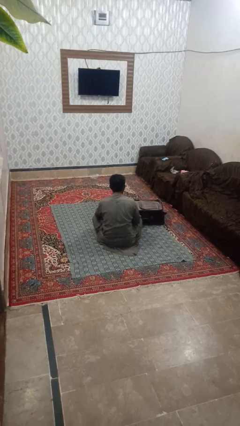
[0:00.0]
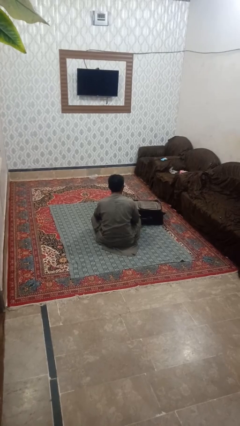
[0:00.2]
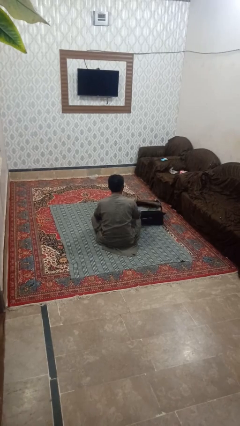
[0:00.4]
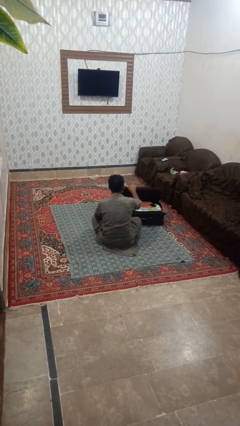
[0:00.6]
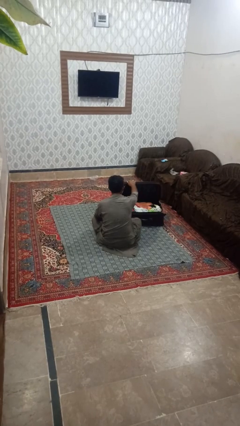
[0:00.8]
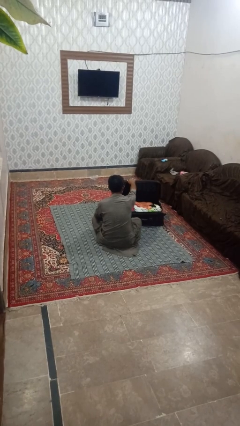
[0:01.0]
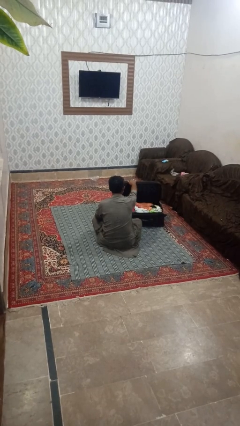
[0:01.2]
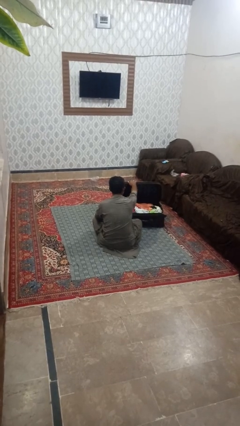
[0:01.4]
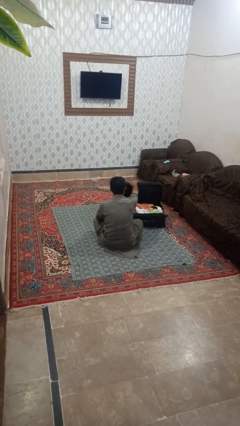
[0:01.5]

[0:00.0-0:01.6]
person opens suitcase

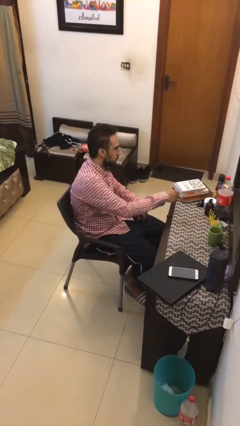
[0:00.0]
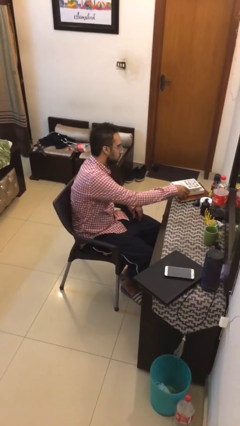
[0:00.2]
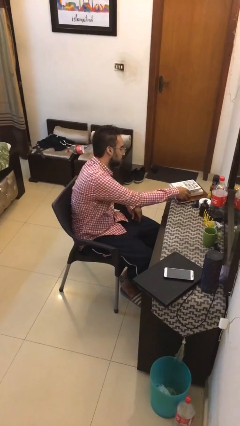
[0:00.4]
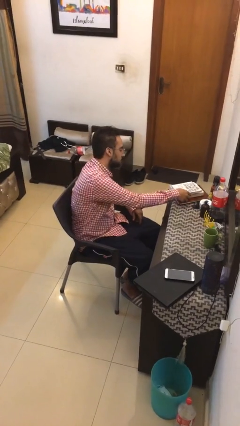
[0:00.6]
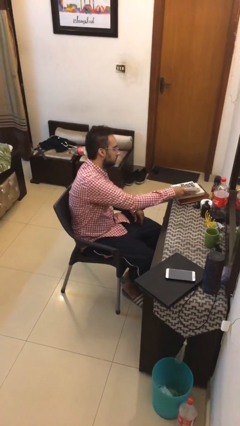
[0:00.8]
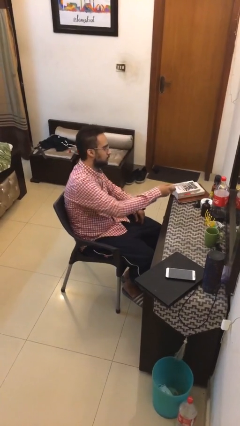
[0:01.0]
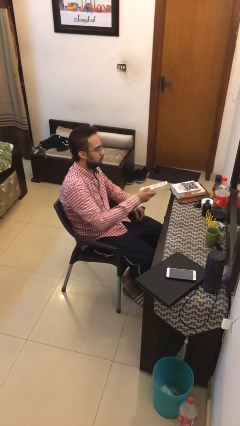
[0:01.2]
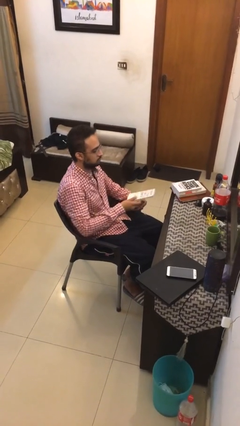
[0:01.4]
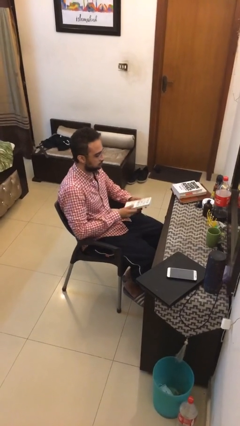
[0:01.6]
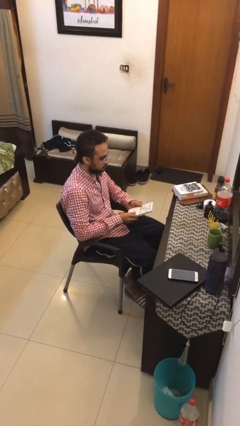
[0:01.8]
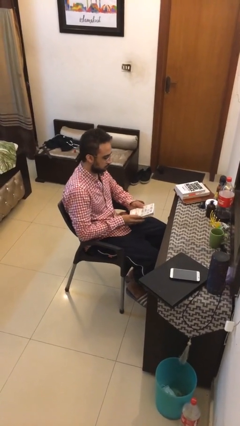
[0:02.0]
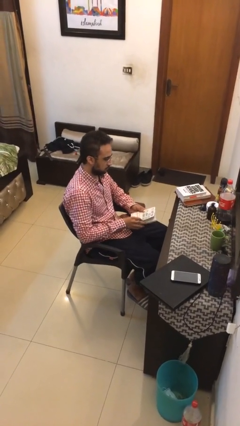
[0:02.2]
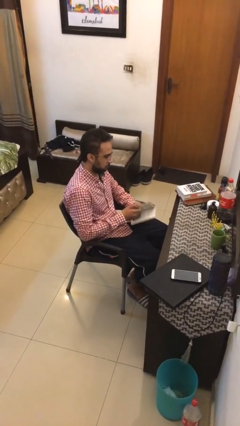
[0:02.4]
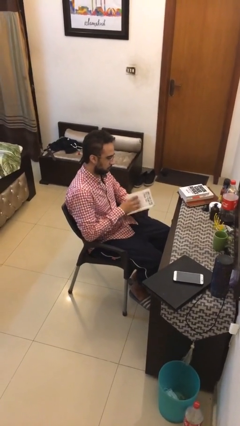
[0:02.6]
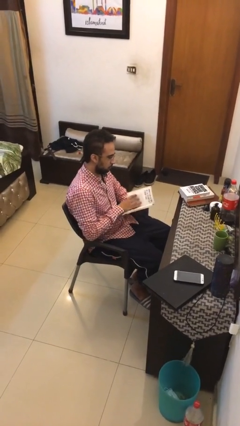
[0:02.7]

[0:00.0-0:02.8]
person picks up object from table

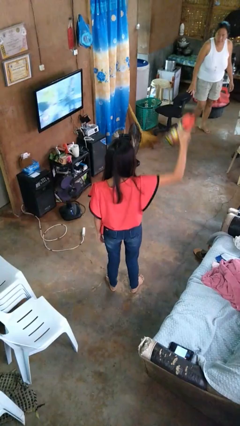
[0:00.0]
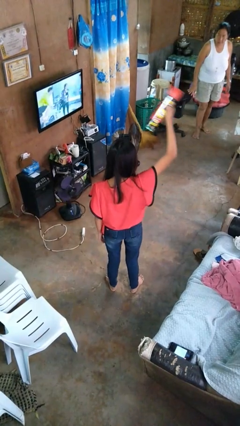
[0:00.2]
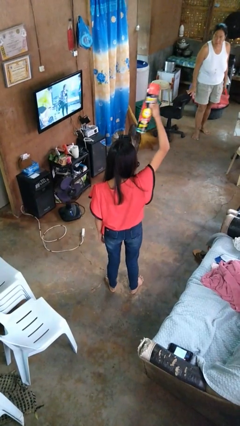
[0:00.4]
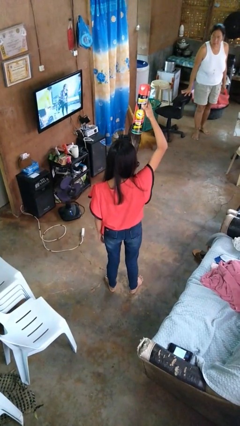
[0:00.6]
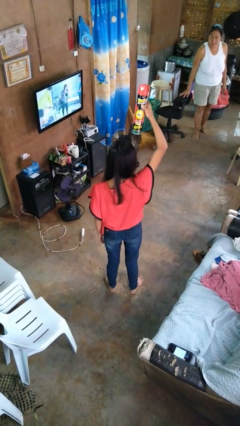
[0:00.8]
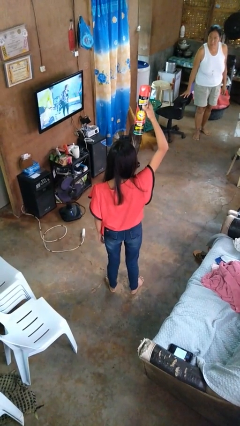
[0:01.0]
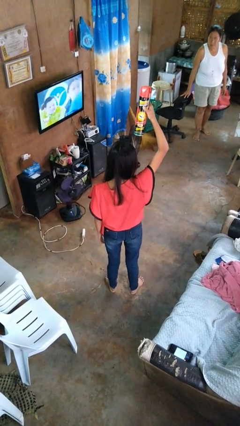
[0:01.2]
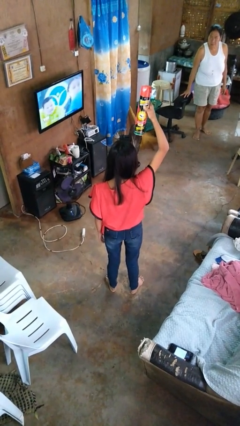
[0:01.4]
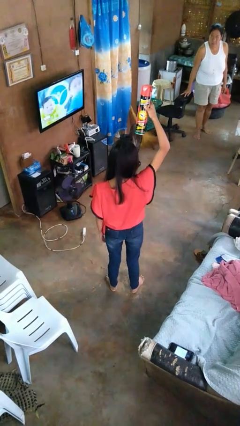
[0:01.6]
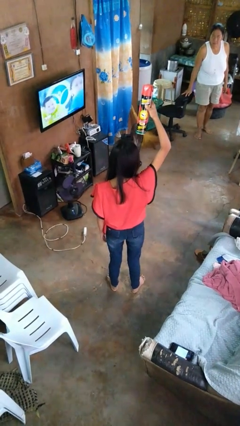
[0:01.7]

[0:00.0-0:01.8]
person holds object above head

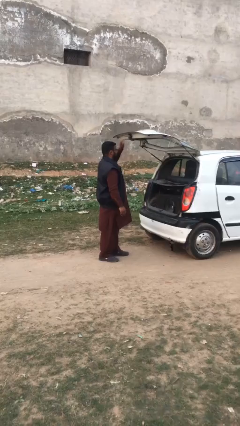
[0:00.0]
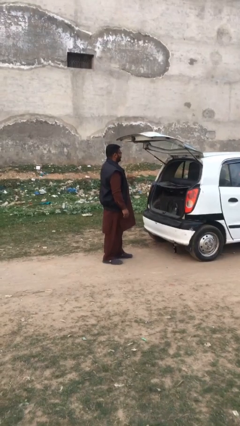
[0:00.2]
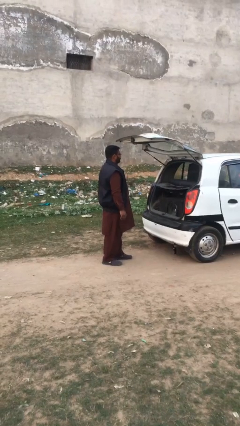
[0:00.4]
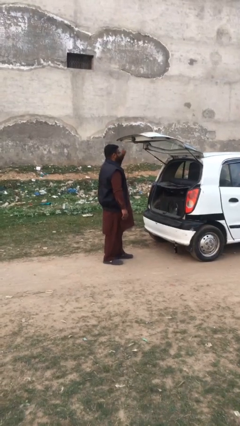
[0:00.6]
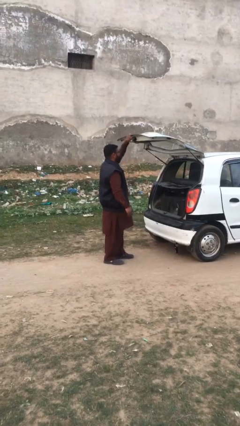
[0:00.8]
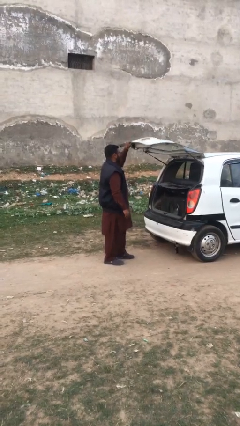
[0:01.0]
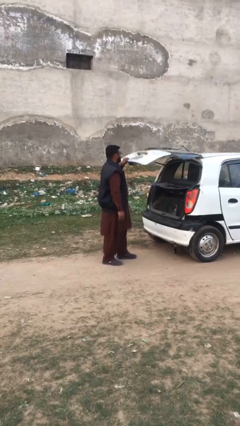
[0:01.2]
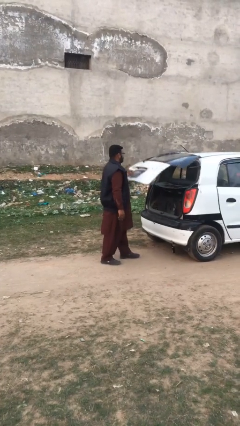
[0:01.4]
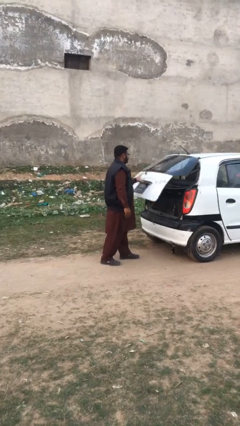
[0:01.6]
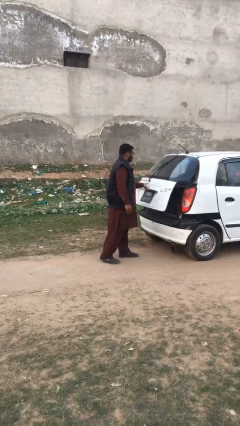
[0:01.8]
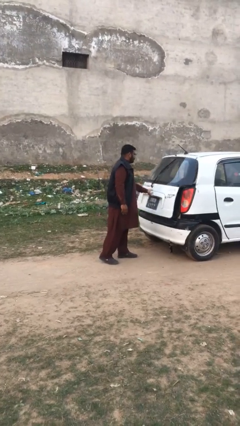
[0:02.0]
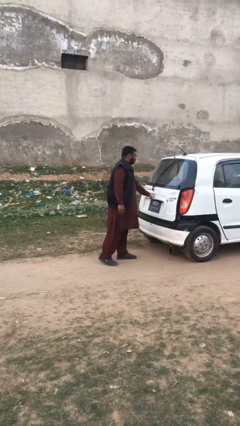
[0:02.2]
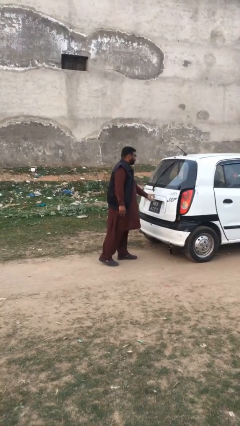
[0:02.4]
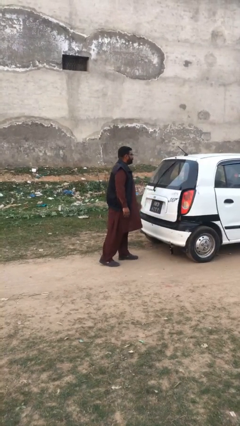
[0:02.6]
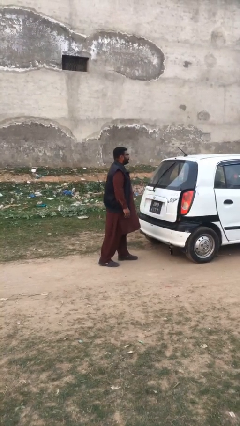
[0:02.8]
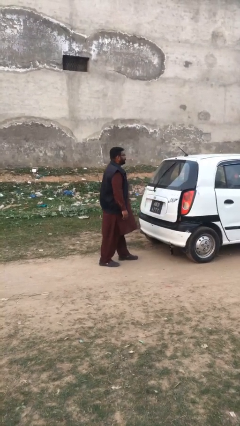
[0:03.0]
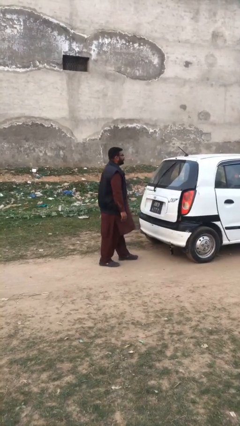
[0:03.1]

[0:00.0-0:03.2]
person closes car trunk

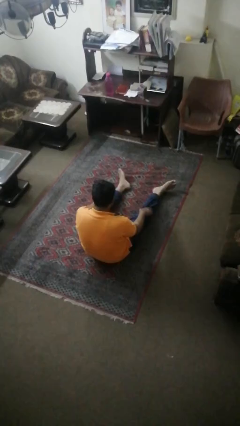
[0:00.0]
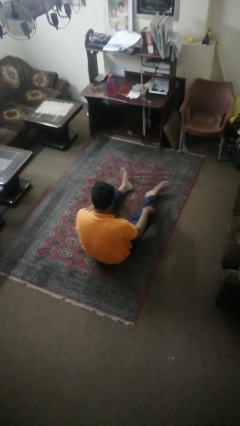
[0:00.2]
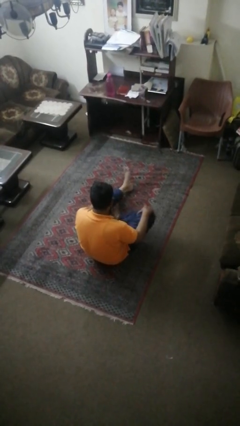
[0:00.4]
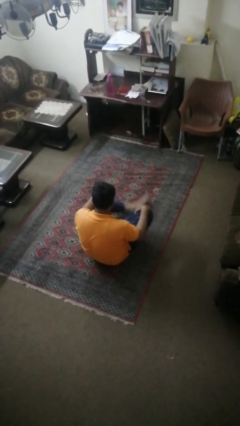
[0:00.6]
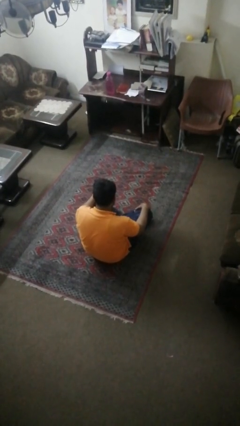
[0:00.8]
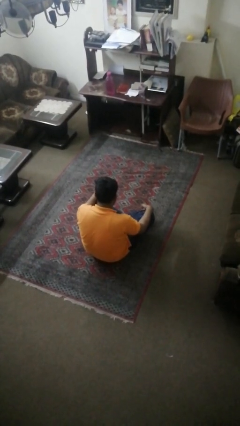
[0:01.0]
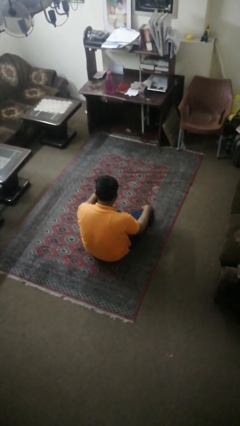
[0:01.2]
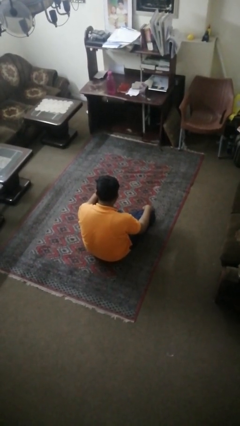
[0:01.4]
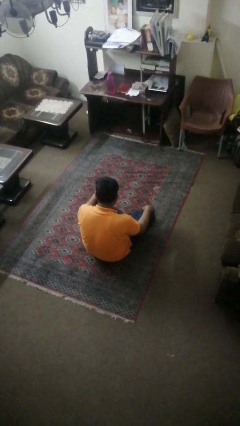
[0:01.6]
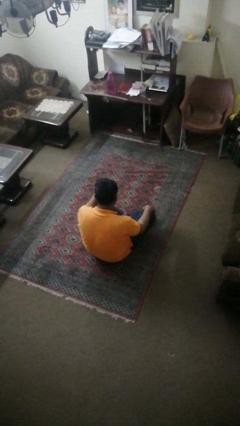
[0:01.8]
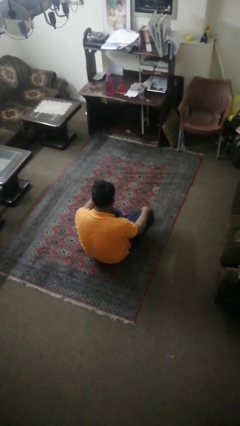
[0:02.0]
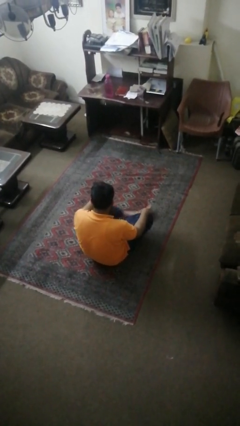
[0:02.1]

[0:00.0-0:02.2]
person crosses legs

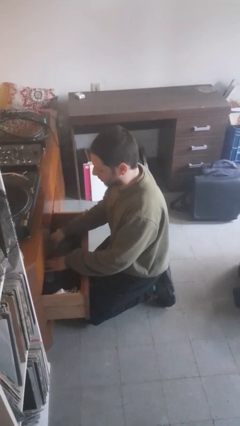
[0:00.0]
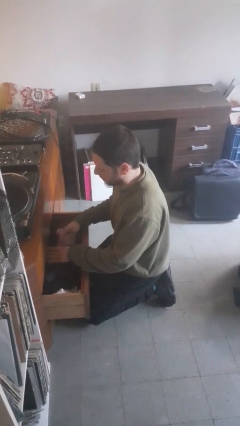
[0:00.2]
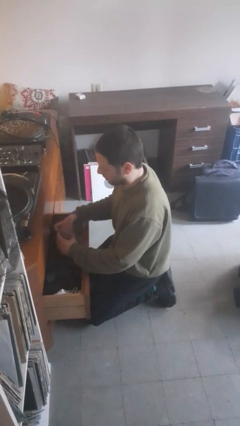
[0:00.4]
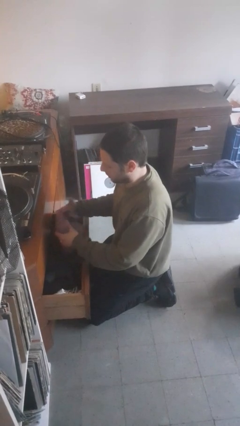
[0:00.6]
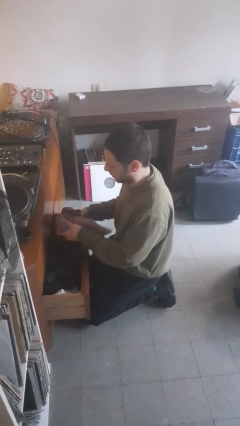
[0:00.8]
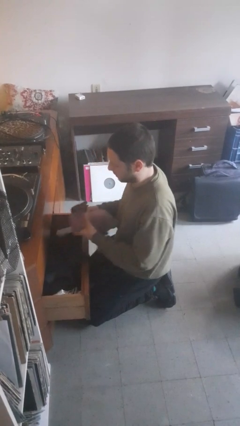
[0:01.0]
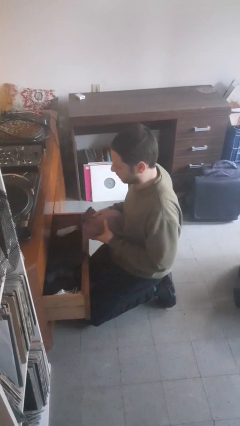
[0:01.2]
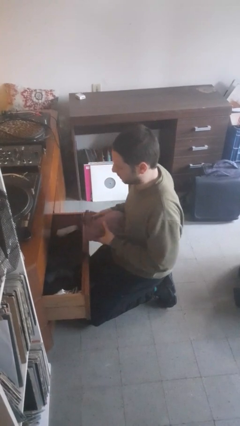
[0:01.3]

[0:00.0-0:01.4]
person takes clothes from dresser

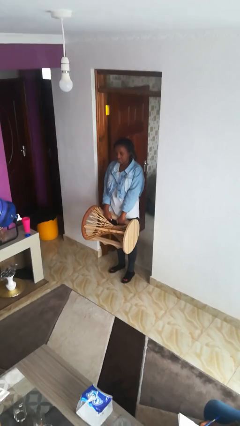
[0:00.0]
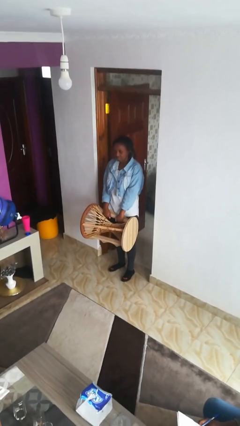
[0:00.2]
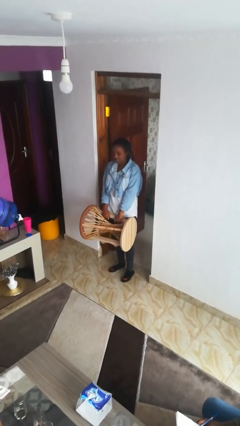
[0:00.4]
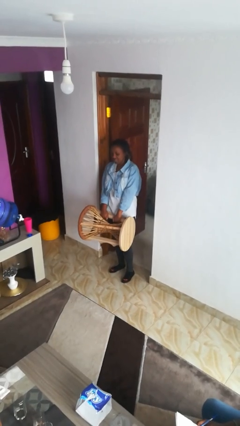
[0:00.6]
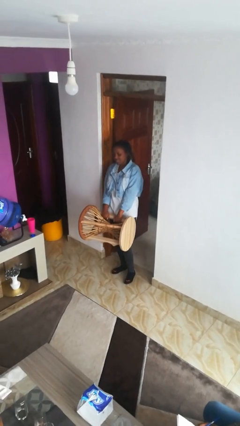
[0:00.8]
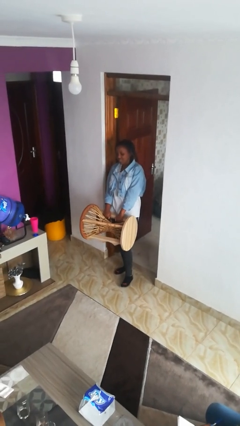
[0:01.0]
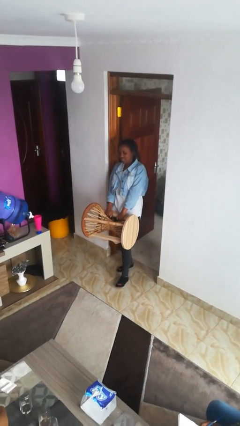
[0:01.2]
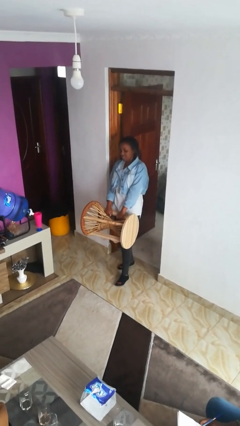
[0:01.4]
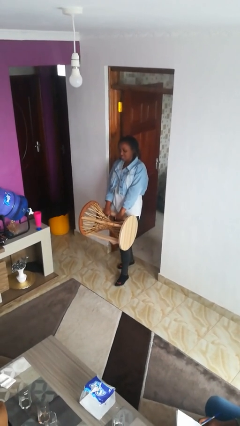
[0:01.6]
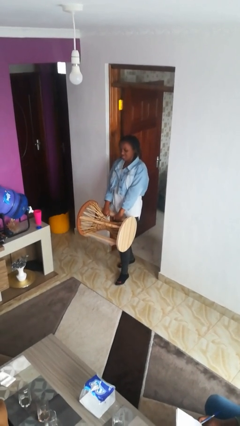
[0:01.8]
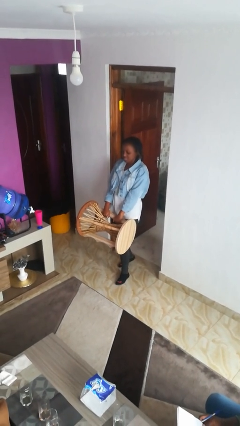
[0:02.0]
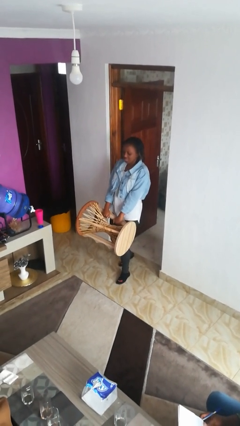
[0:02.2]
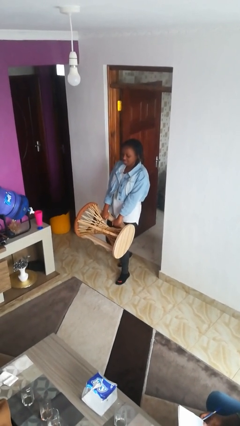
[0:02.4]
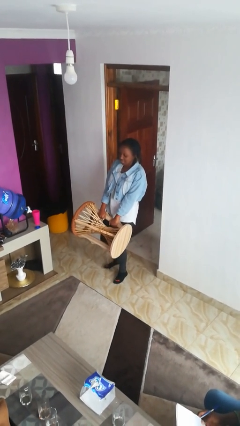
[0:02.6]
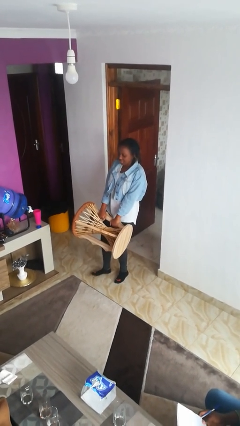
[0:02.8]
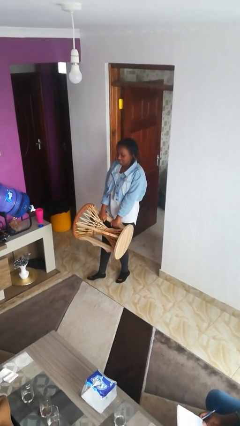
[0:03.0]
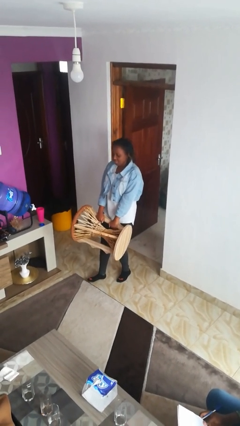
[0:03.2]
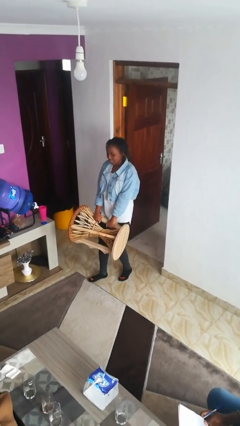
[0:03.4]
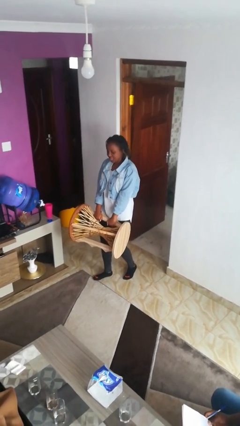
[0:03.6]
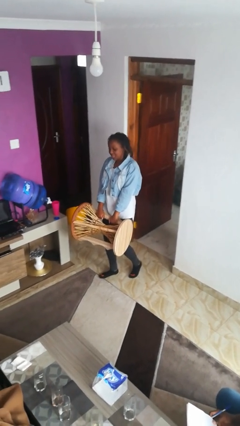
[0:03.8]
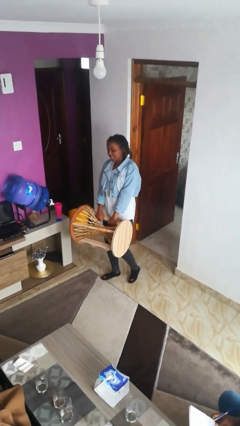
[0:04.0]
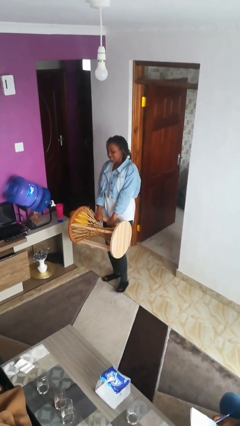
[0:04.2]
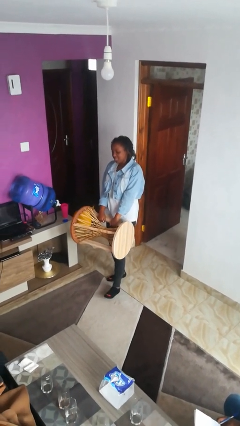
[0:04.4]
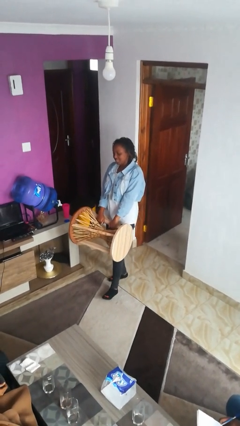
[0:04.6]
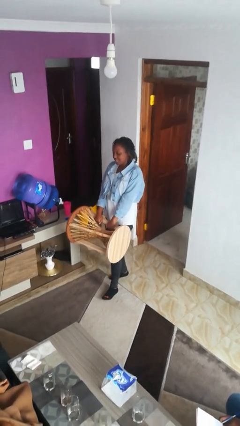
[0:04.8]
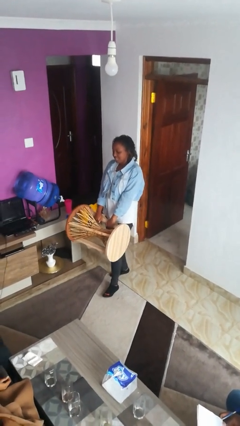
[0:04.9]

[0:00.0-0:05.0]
person carries furniture
